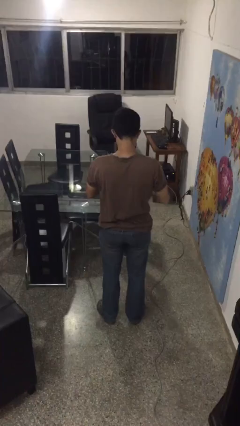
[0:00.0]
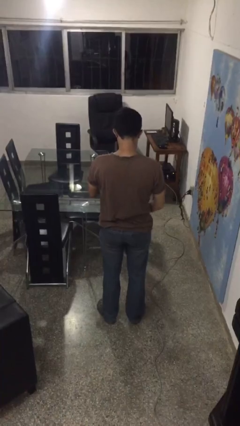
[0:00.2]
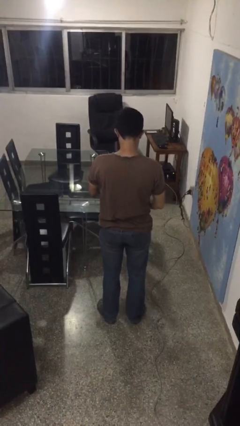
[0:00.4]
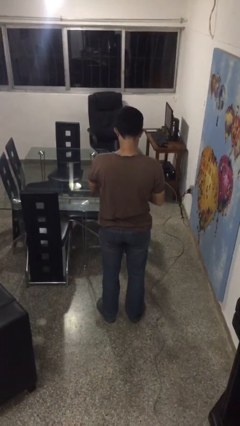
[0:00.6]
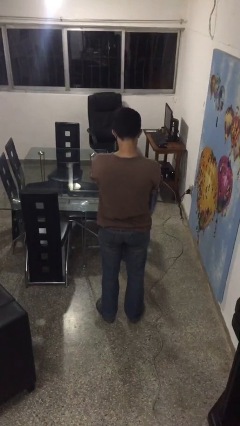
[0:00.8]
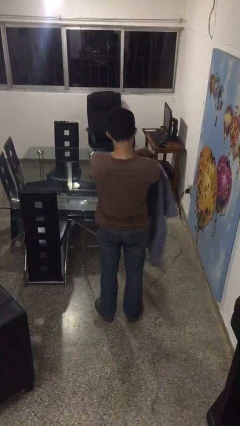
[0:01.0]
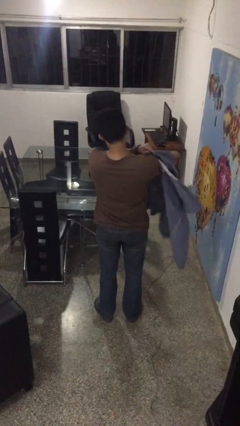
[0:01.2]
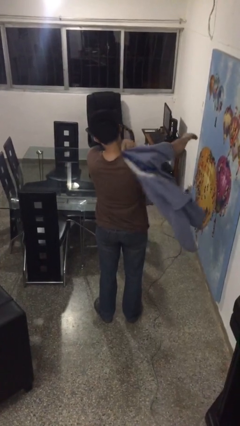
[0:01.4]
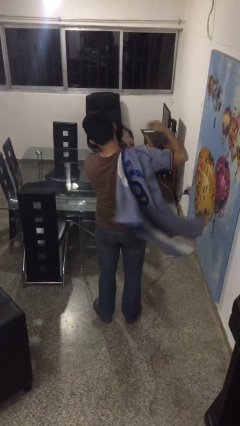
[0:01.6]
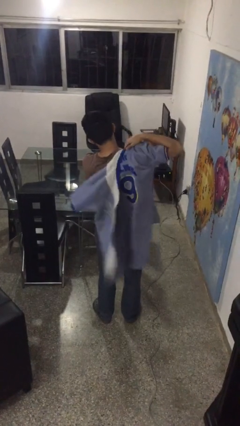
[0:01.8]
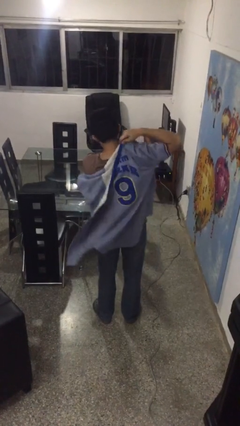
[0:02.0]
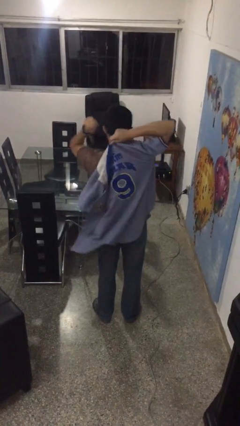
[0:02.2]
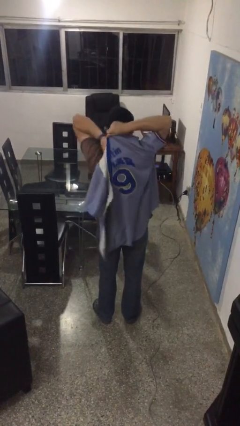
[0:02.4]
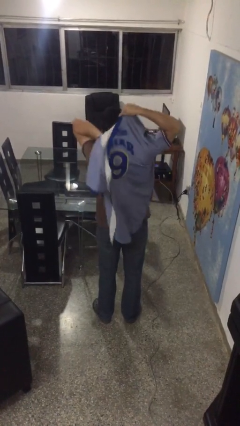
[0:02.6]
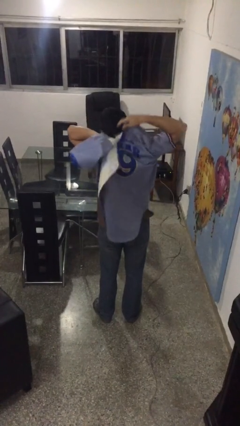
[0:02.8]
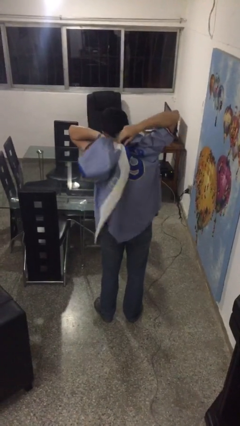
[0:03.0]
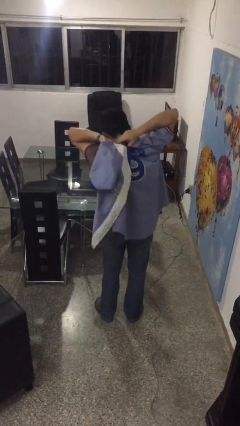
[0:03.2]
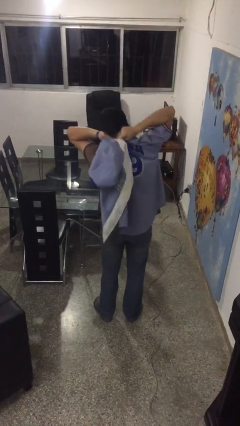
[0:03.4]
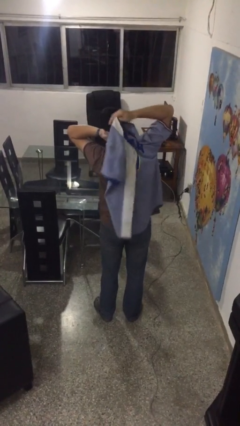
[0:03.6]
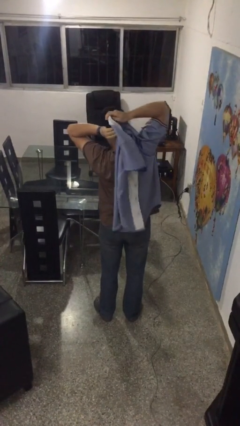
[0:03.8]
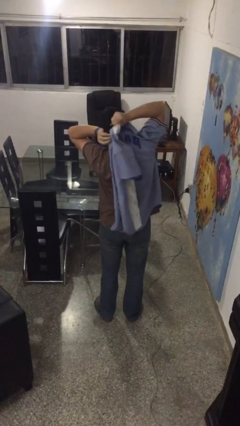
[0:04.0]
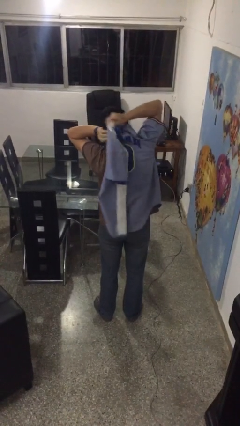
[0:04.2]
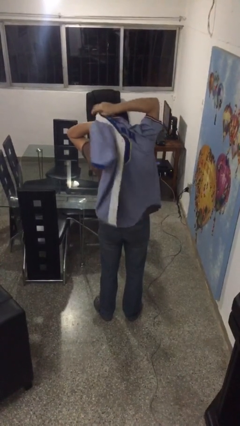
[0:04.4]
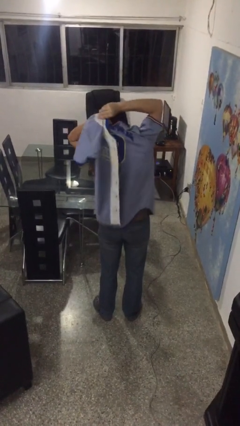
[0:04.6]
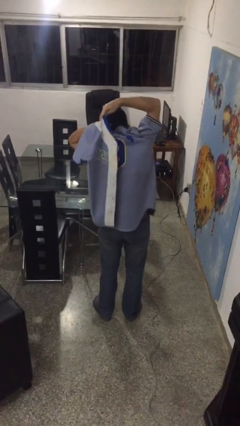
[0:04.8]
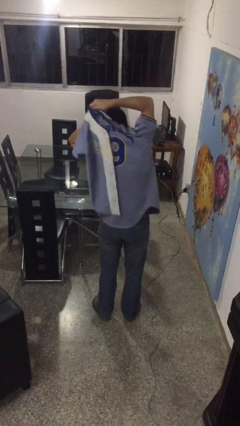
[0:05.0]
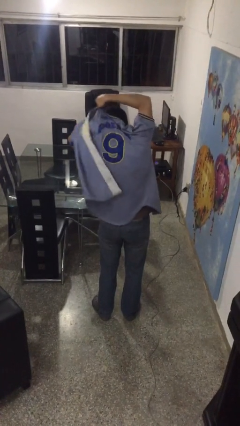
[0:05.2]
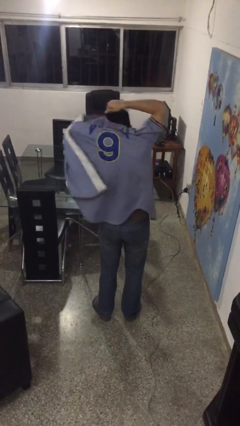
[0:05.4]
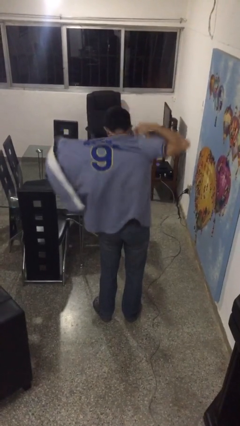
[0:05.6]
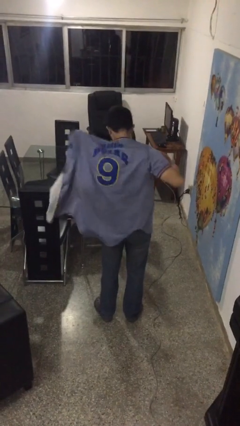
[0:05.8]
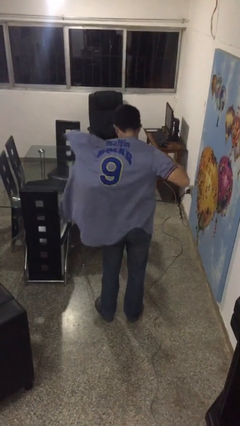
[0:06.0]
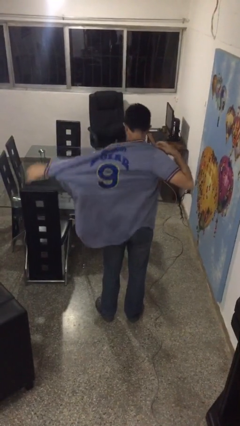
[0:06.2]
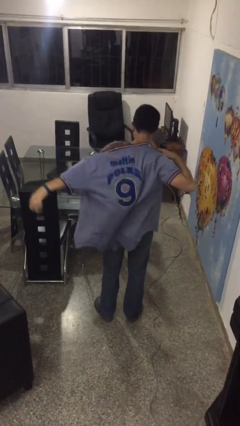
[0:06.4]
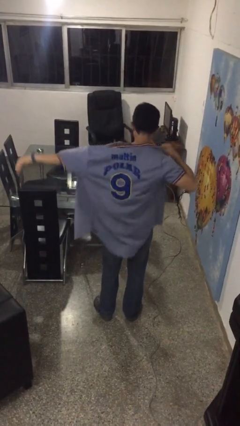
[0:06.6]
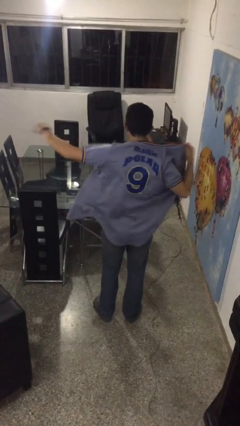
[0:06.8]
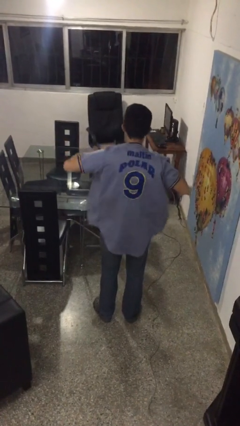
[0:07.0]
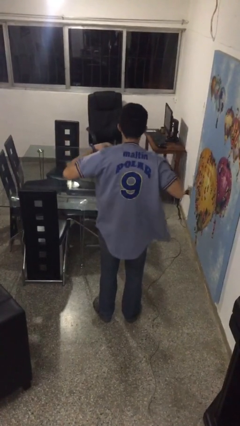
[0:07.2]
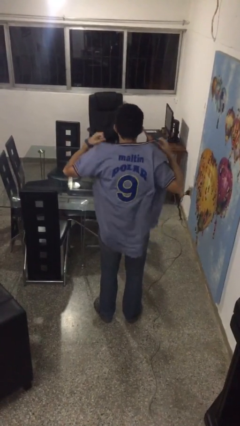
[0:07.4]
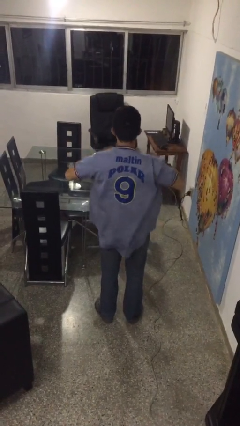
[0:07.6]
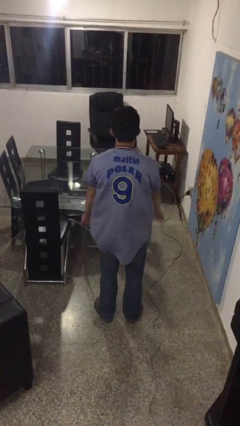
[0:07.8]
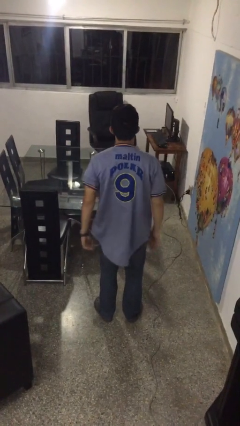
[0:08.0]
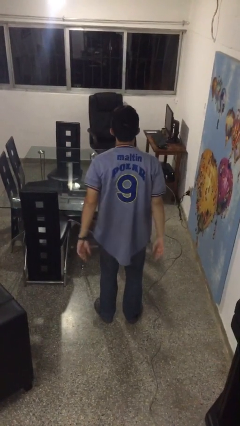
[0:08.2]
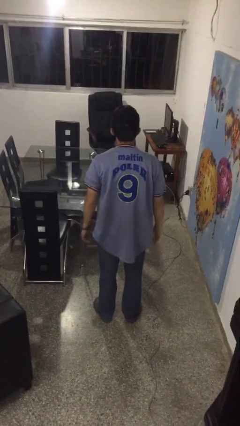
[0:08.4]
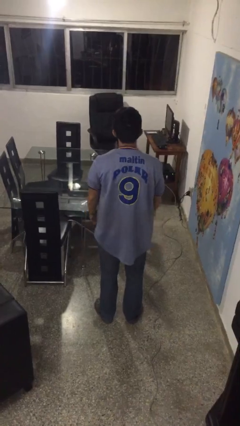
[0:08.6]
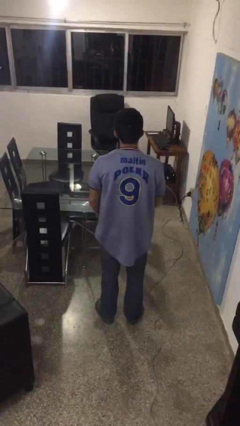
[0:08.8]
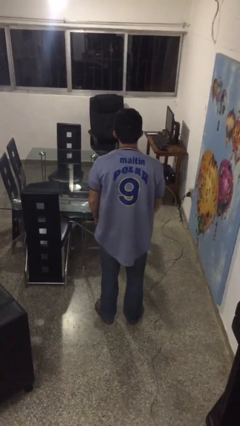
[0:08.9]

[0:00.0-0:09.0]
person puts on shirt

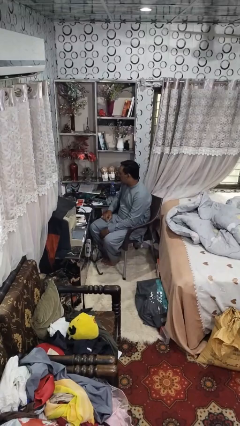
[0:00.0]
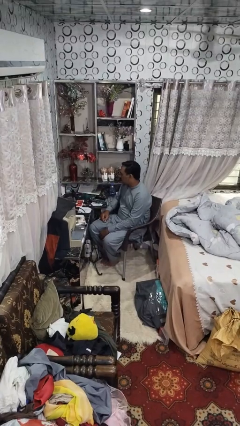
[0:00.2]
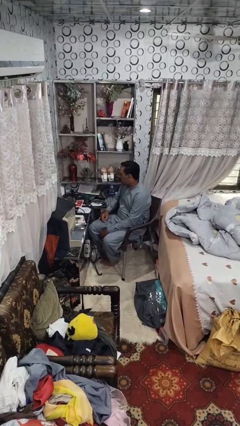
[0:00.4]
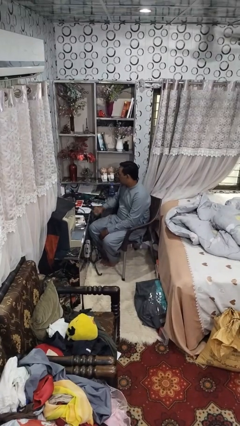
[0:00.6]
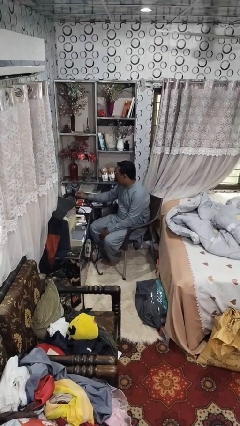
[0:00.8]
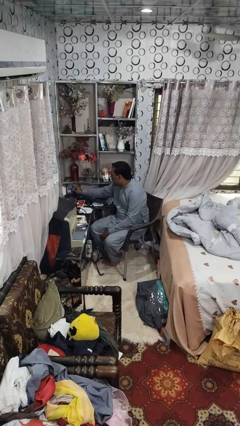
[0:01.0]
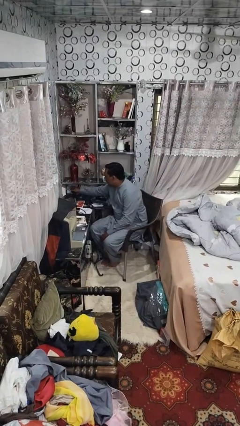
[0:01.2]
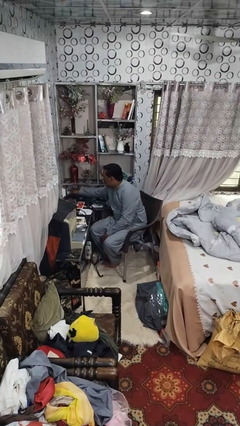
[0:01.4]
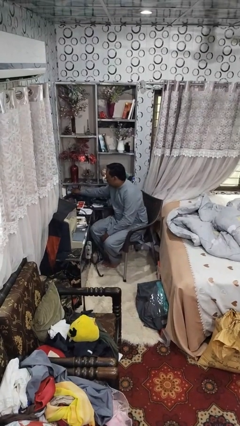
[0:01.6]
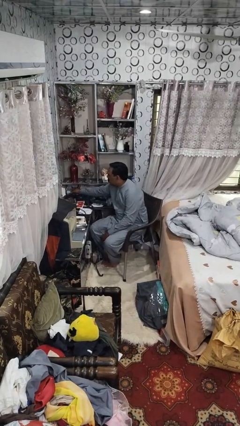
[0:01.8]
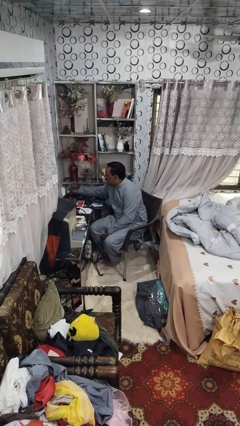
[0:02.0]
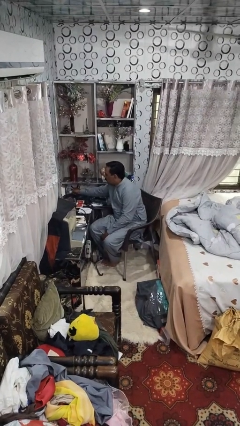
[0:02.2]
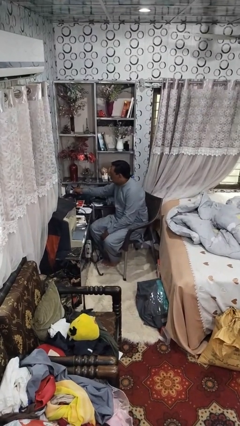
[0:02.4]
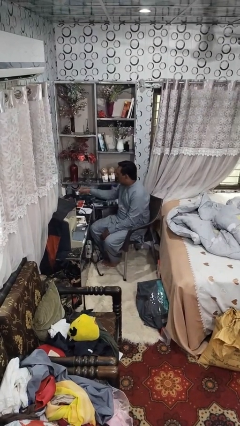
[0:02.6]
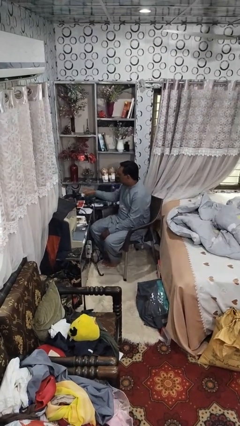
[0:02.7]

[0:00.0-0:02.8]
person unplugs from electrical socket

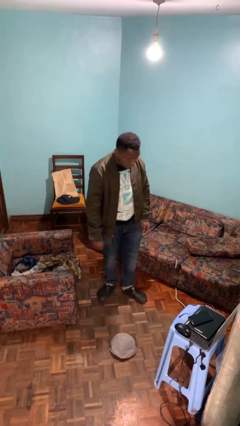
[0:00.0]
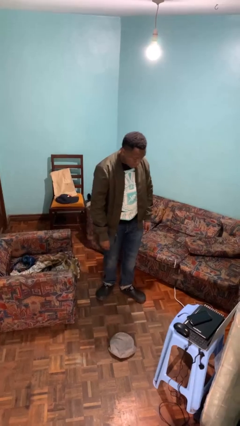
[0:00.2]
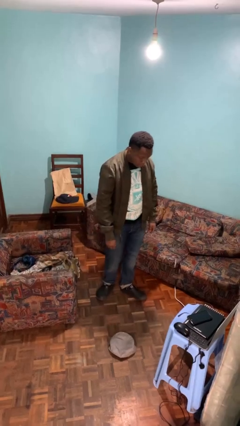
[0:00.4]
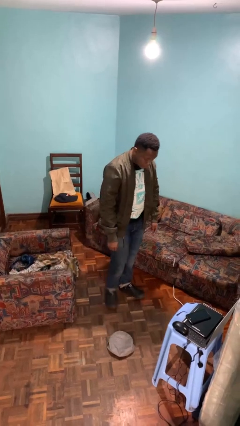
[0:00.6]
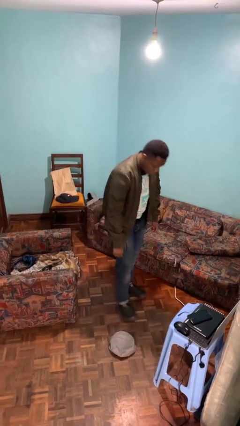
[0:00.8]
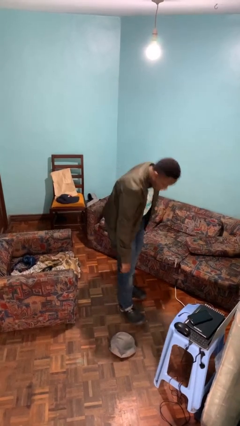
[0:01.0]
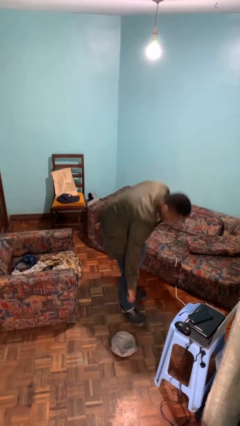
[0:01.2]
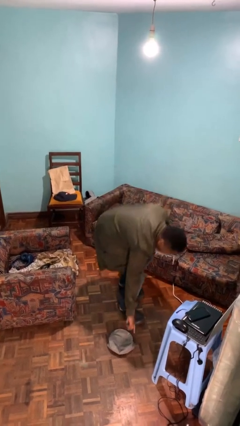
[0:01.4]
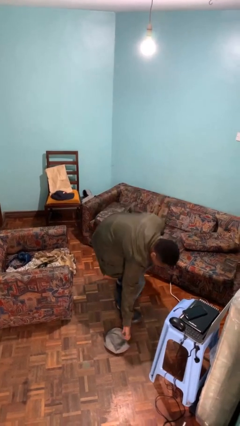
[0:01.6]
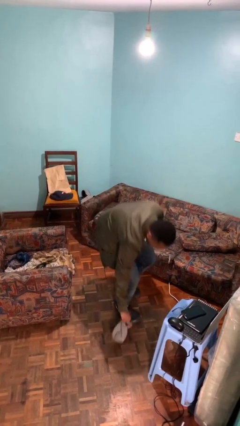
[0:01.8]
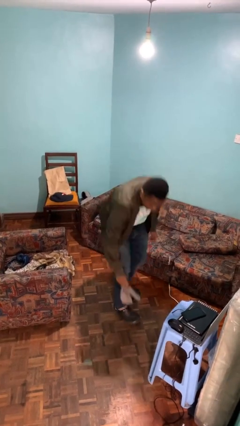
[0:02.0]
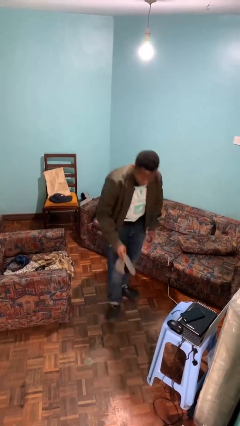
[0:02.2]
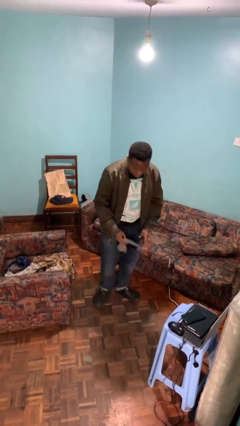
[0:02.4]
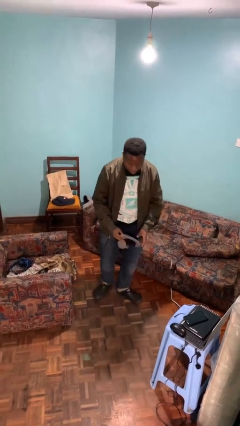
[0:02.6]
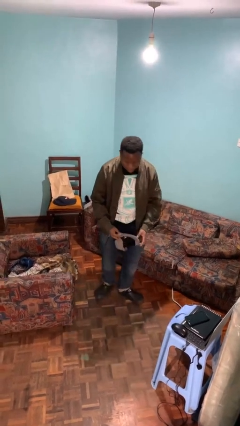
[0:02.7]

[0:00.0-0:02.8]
person picks up object from floor

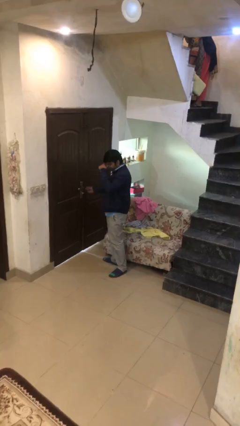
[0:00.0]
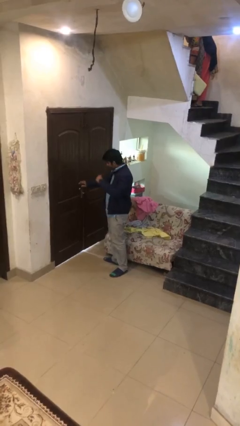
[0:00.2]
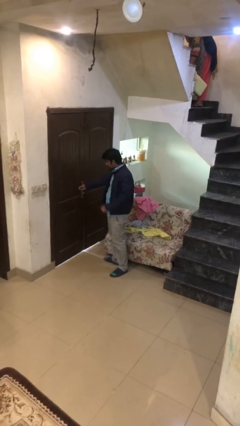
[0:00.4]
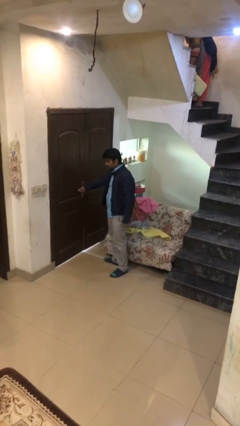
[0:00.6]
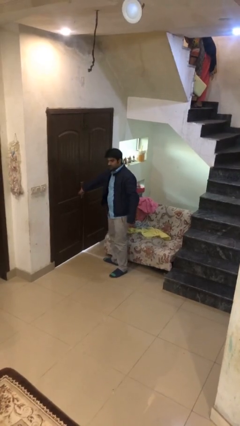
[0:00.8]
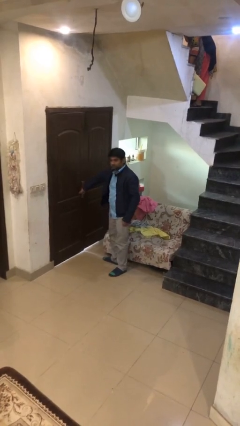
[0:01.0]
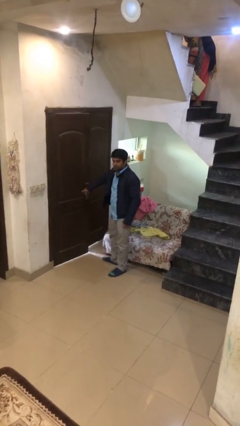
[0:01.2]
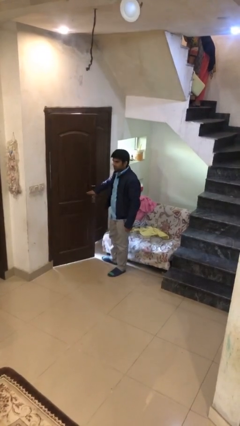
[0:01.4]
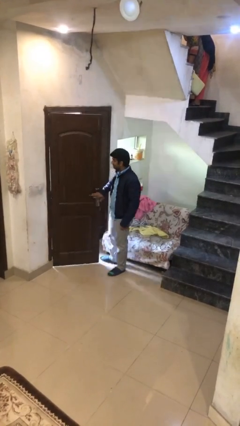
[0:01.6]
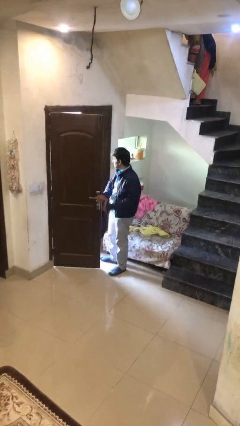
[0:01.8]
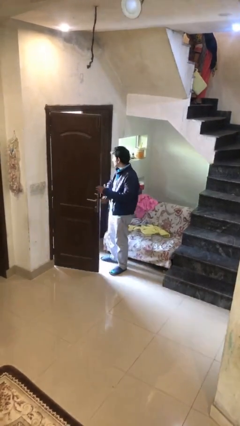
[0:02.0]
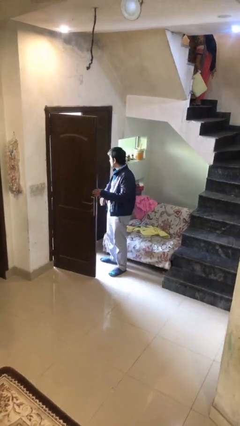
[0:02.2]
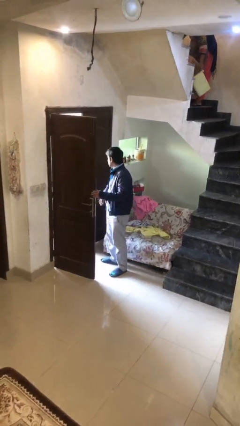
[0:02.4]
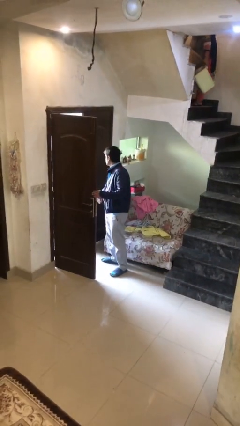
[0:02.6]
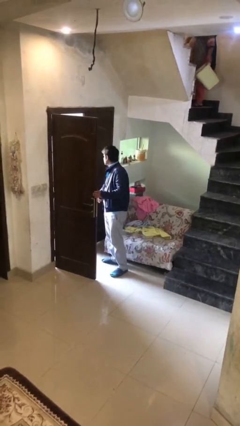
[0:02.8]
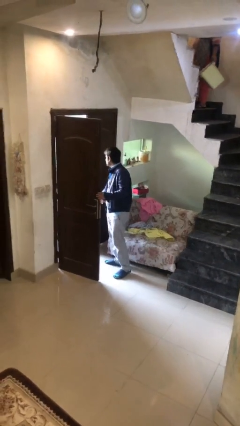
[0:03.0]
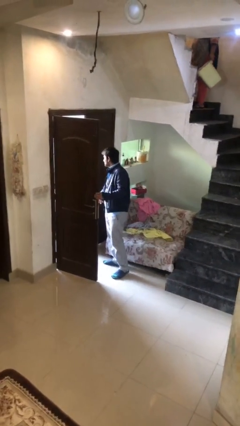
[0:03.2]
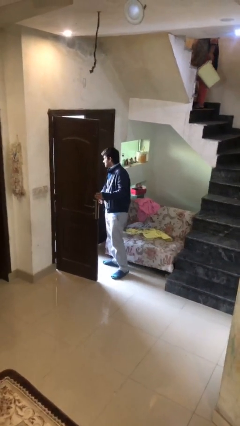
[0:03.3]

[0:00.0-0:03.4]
person opens facility door
